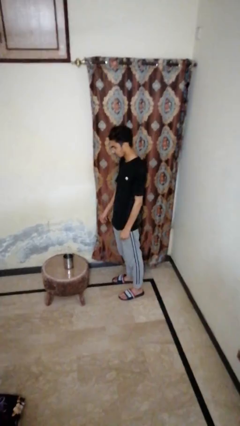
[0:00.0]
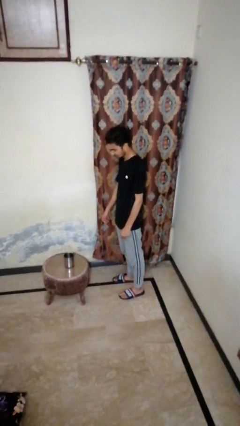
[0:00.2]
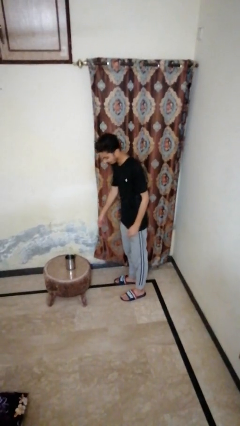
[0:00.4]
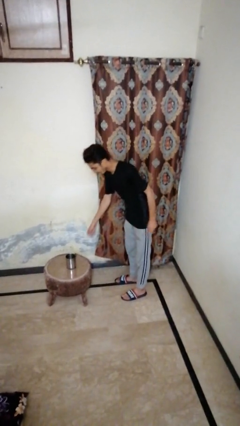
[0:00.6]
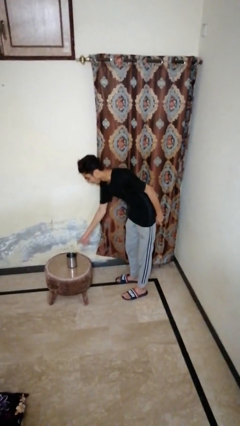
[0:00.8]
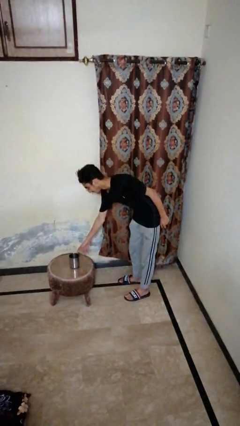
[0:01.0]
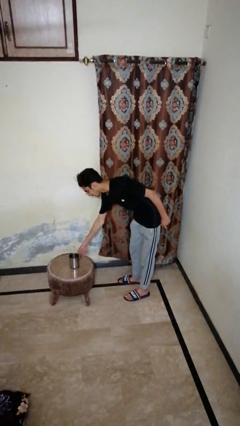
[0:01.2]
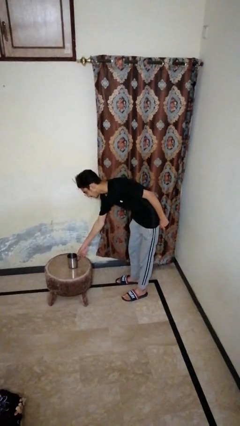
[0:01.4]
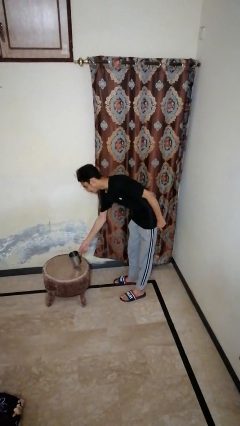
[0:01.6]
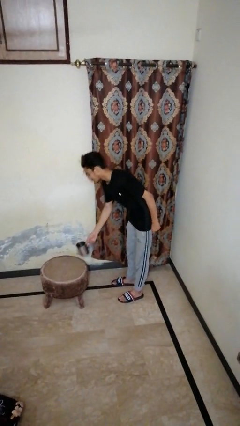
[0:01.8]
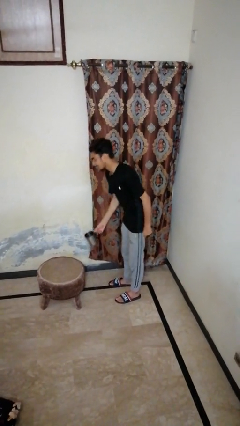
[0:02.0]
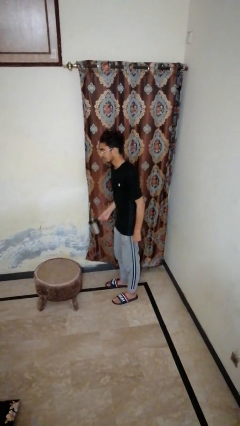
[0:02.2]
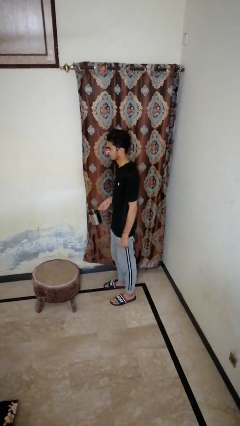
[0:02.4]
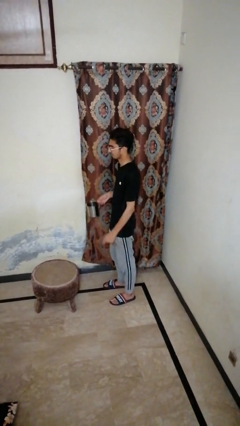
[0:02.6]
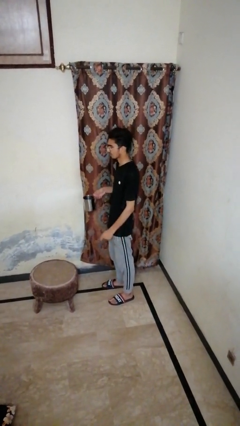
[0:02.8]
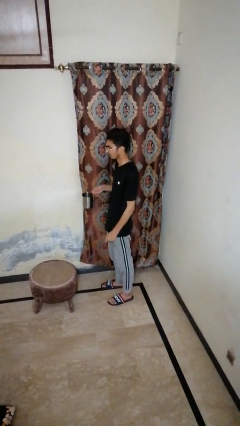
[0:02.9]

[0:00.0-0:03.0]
person picks up object from table

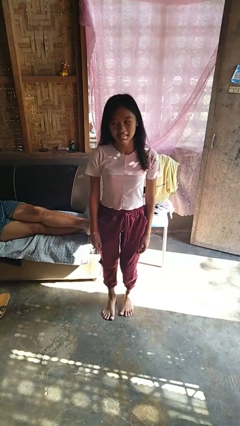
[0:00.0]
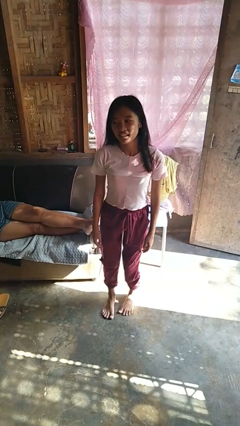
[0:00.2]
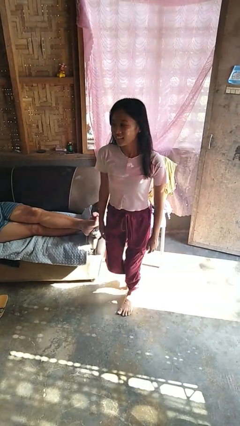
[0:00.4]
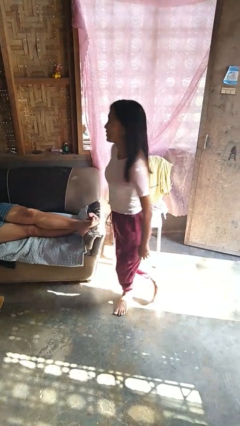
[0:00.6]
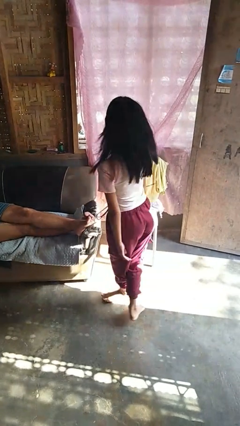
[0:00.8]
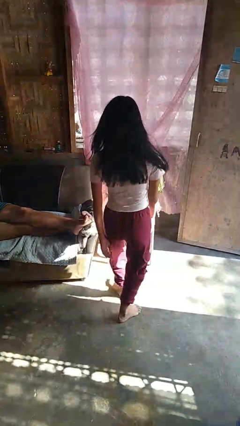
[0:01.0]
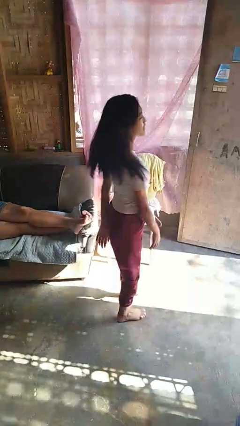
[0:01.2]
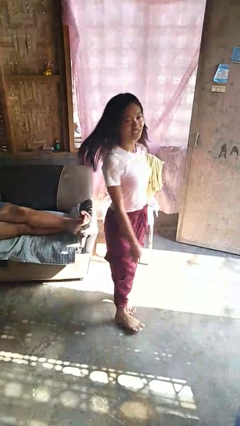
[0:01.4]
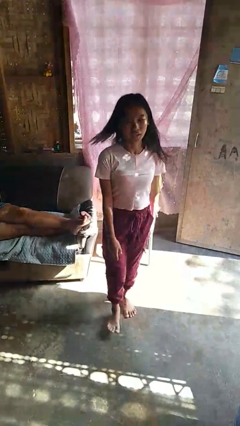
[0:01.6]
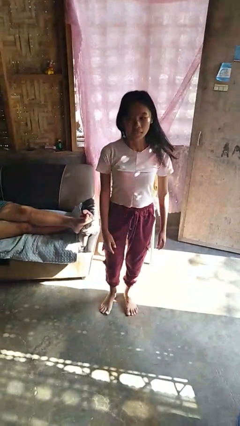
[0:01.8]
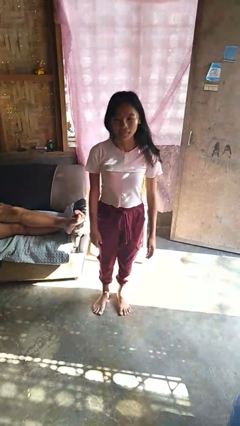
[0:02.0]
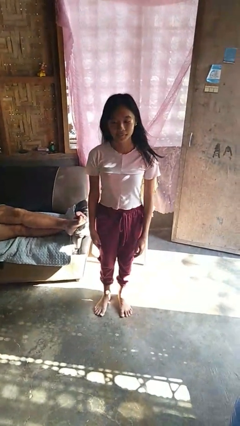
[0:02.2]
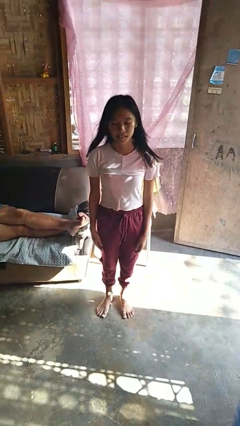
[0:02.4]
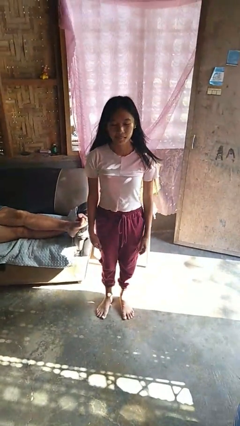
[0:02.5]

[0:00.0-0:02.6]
person twirls

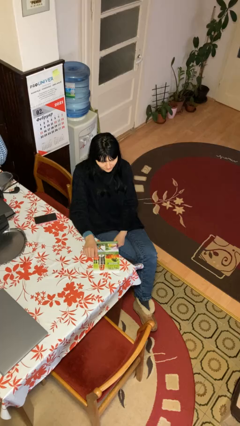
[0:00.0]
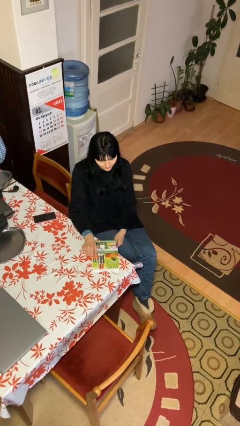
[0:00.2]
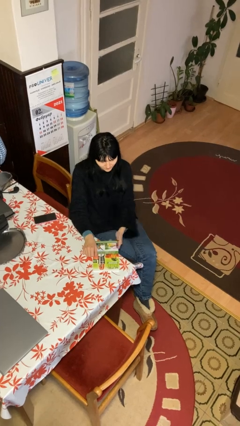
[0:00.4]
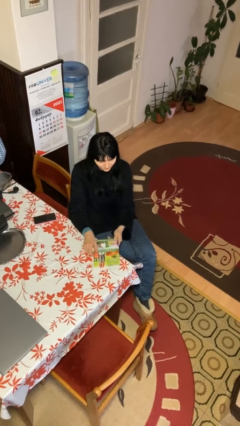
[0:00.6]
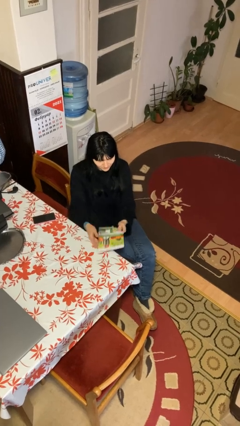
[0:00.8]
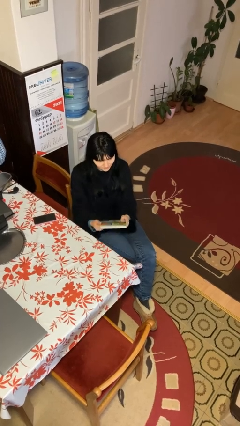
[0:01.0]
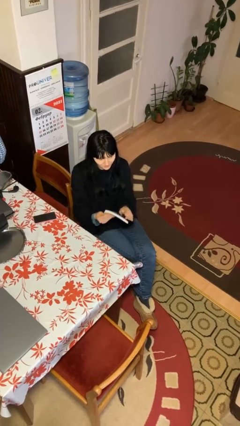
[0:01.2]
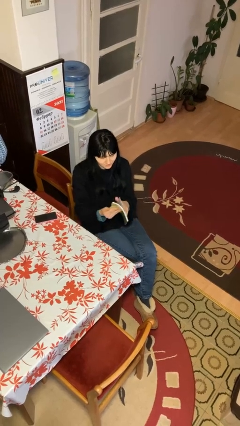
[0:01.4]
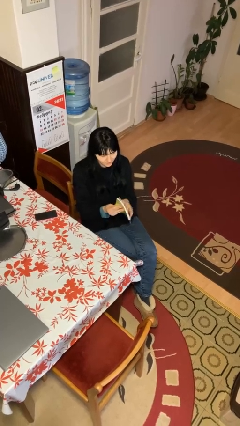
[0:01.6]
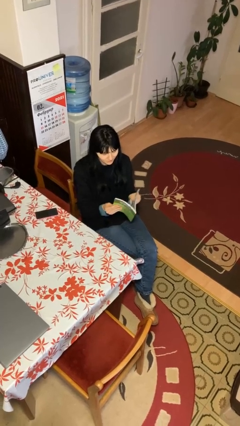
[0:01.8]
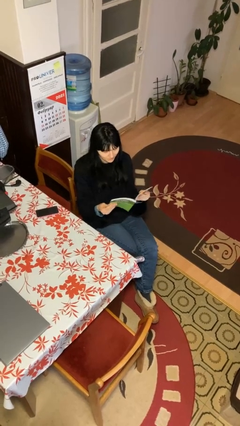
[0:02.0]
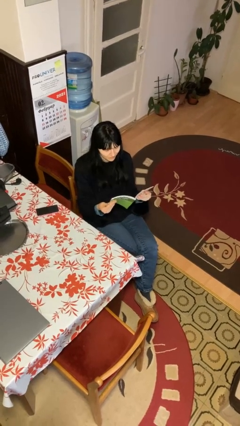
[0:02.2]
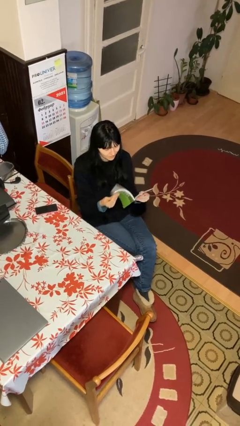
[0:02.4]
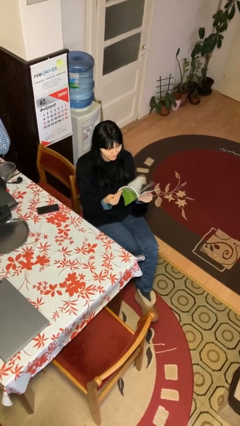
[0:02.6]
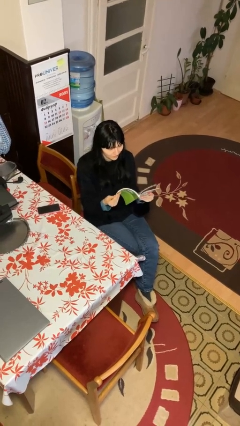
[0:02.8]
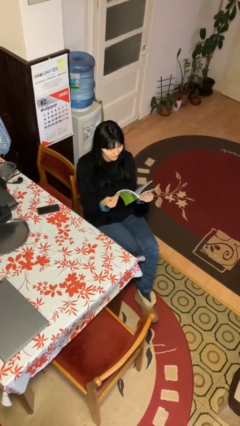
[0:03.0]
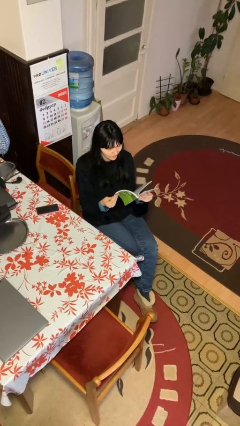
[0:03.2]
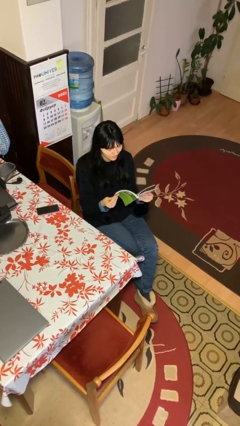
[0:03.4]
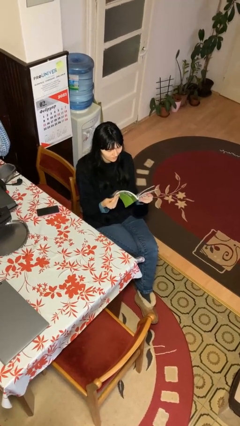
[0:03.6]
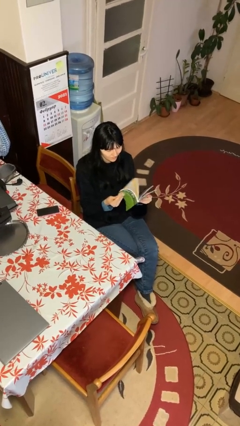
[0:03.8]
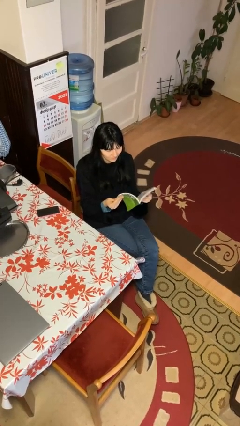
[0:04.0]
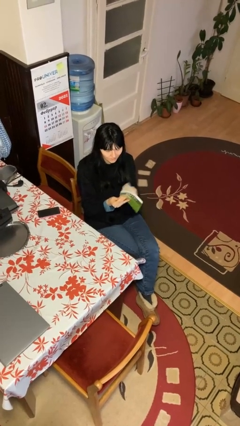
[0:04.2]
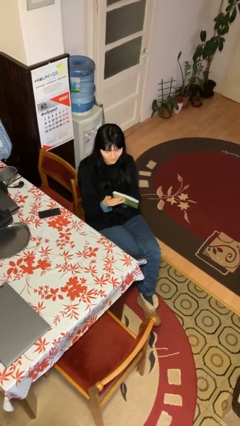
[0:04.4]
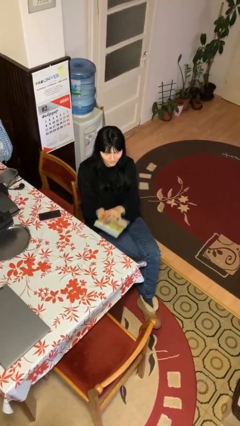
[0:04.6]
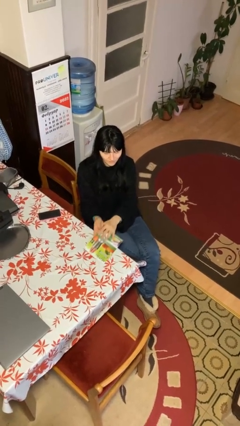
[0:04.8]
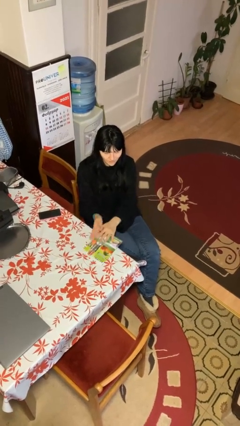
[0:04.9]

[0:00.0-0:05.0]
person reads document

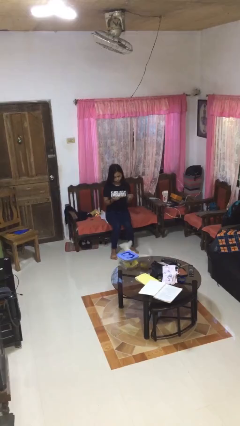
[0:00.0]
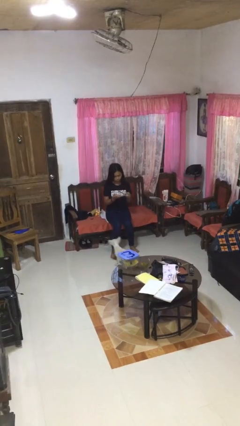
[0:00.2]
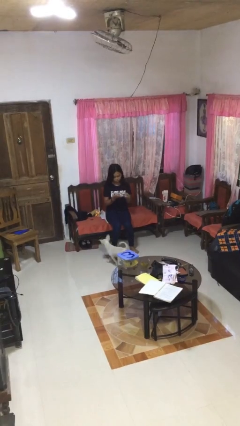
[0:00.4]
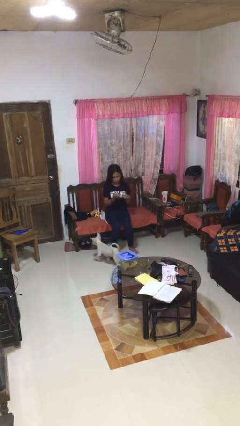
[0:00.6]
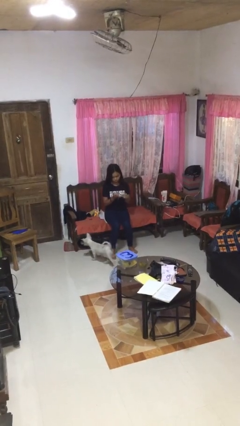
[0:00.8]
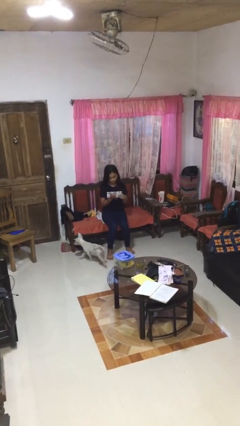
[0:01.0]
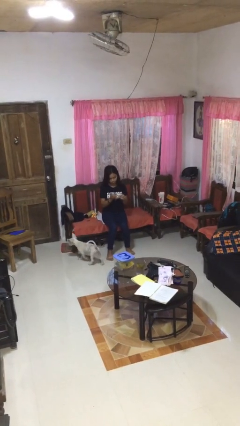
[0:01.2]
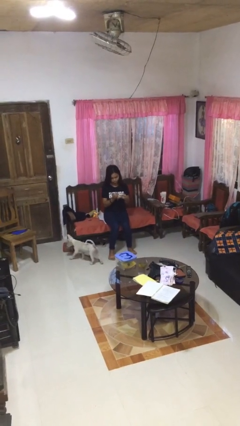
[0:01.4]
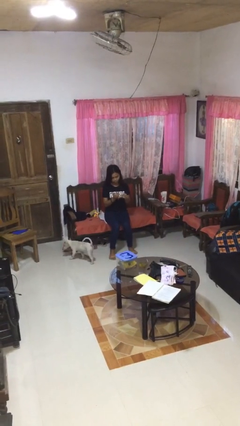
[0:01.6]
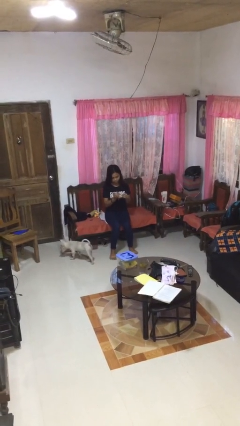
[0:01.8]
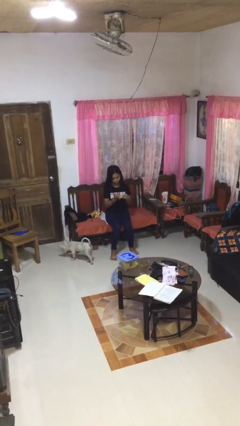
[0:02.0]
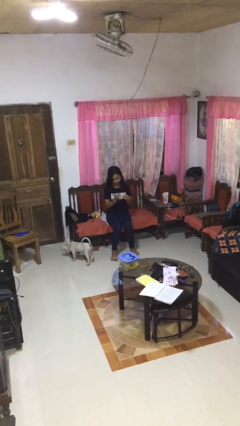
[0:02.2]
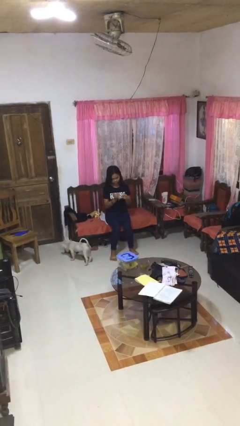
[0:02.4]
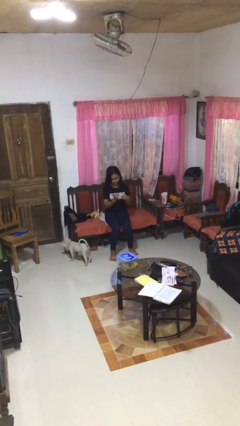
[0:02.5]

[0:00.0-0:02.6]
person files fingernails

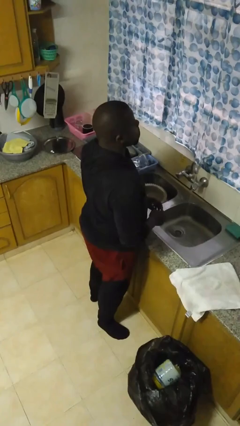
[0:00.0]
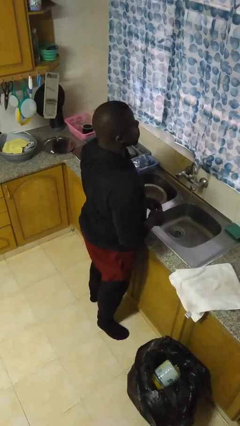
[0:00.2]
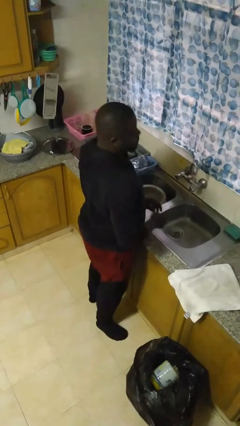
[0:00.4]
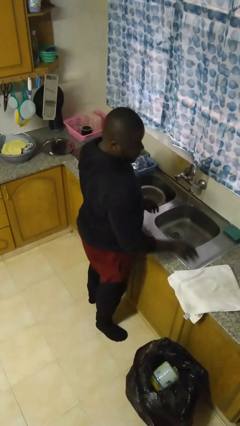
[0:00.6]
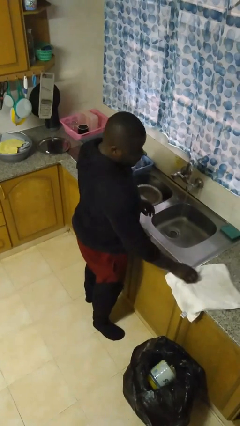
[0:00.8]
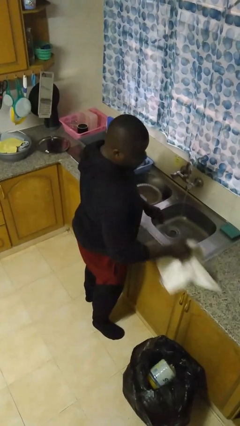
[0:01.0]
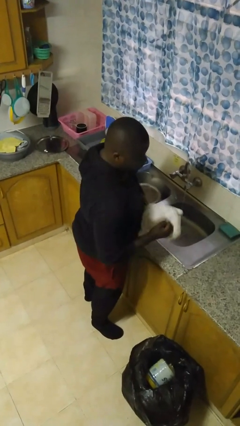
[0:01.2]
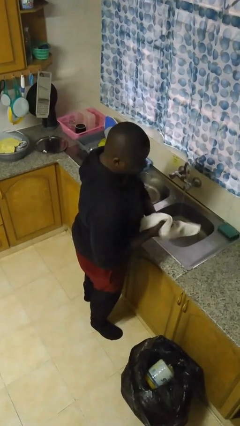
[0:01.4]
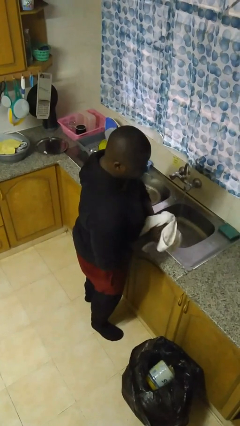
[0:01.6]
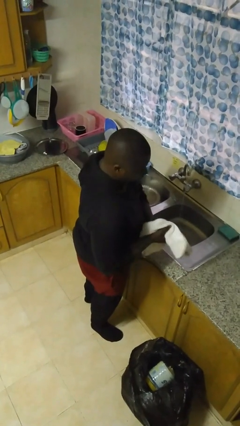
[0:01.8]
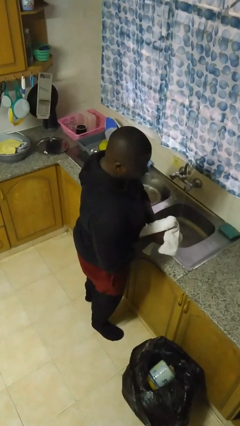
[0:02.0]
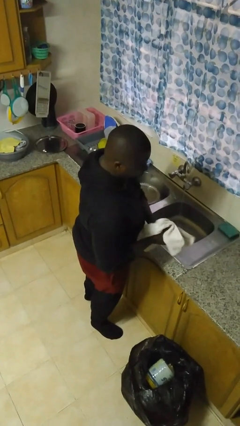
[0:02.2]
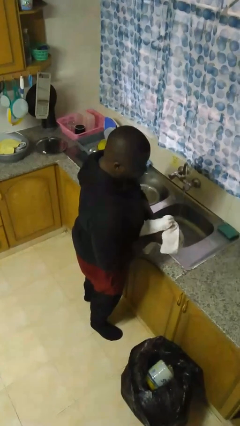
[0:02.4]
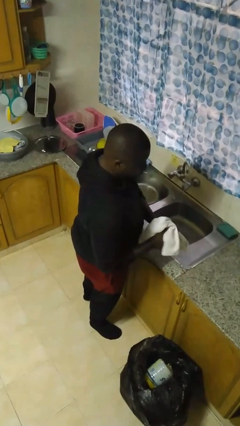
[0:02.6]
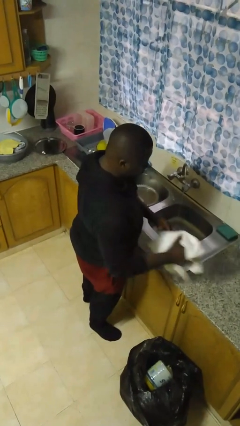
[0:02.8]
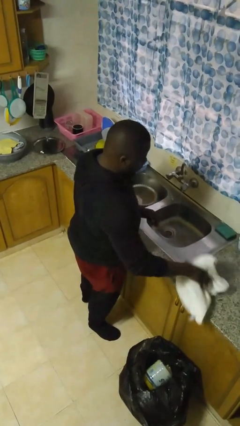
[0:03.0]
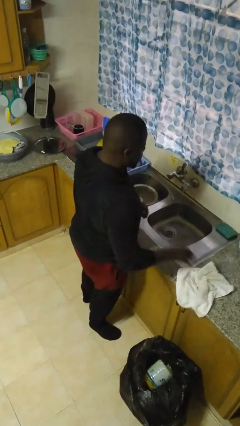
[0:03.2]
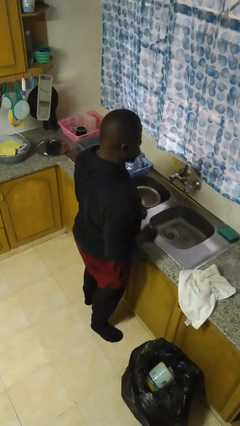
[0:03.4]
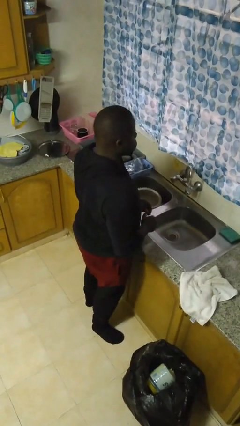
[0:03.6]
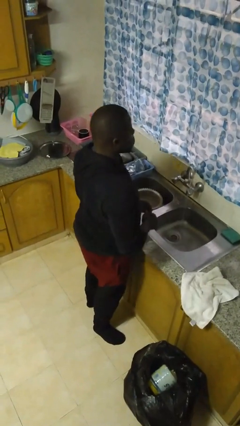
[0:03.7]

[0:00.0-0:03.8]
person dries hands with towel

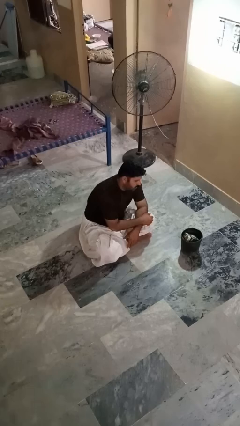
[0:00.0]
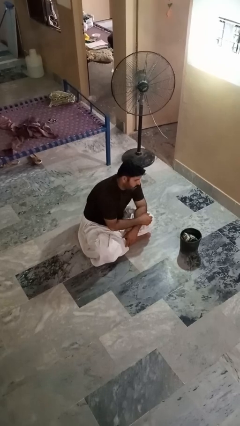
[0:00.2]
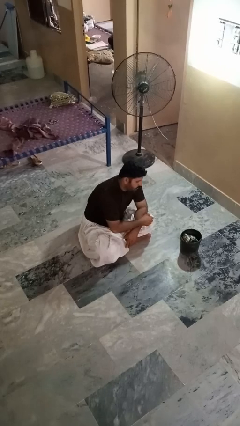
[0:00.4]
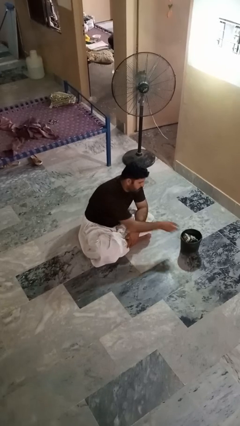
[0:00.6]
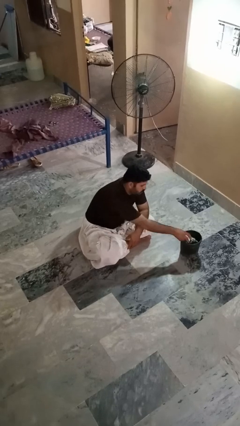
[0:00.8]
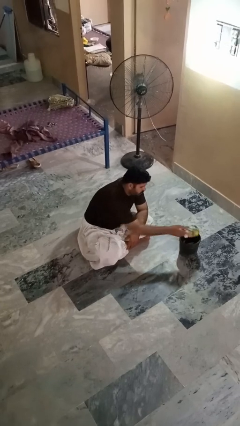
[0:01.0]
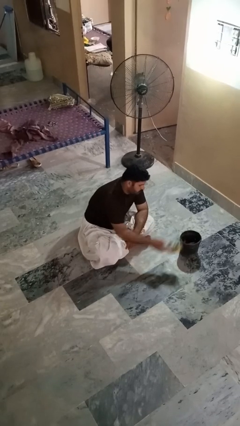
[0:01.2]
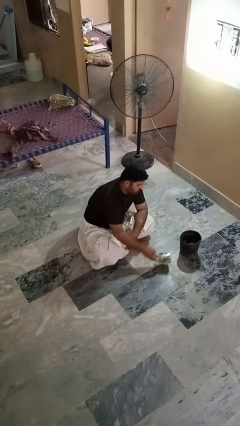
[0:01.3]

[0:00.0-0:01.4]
person takes object from basket
